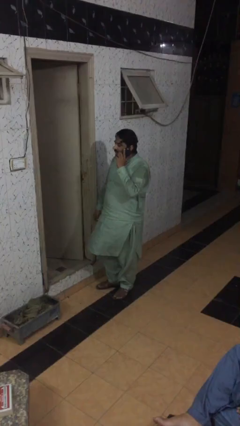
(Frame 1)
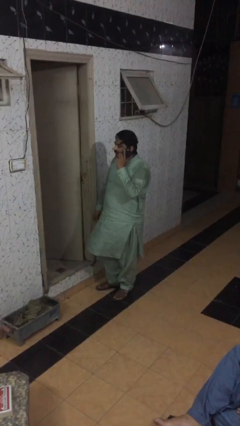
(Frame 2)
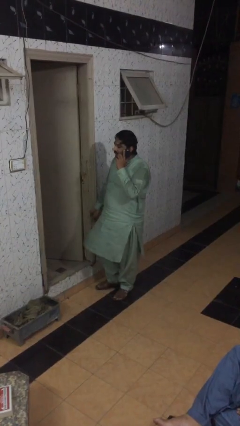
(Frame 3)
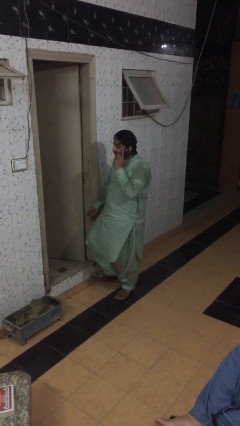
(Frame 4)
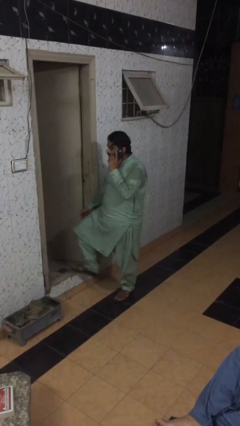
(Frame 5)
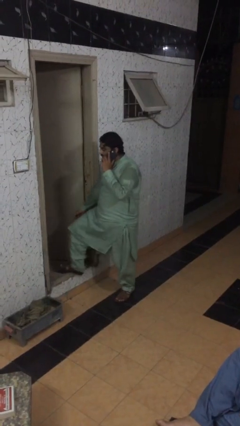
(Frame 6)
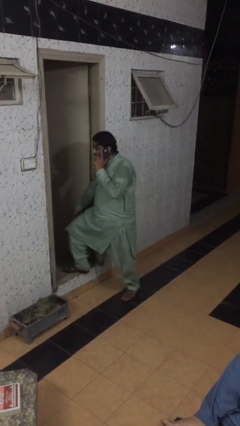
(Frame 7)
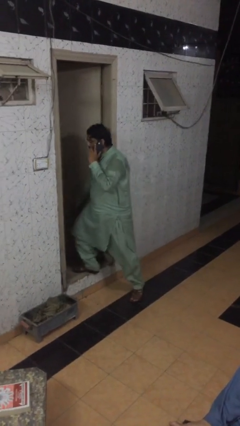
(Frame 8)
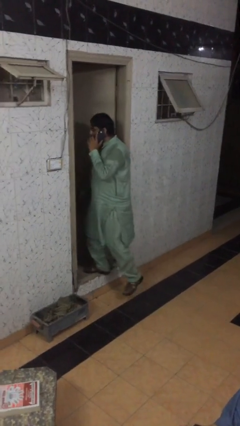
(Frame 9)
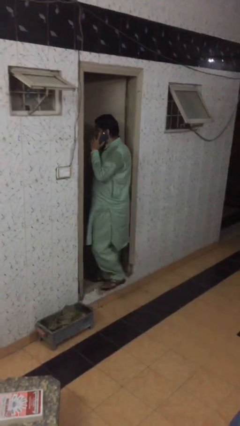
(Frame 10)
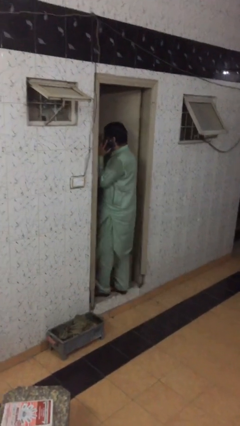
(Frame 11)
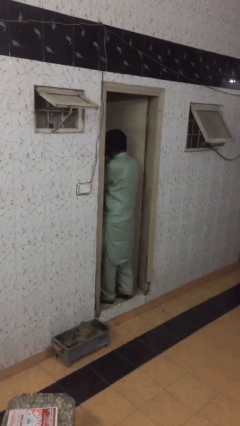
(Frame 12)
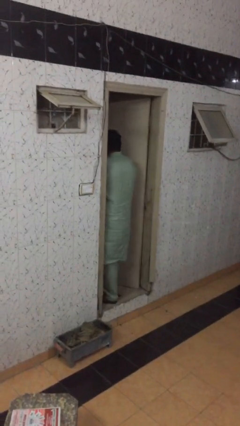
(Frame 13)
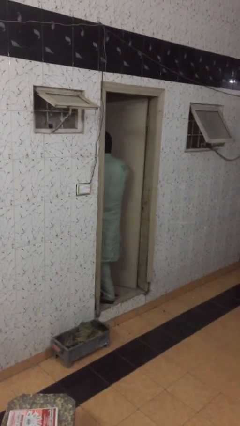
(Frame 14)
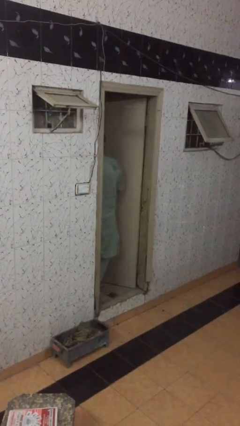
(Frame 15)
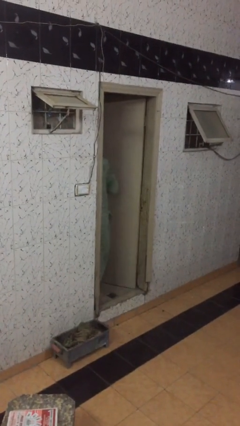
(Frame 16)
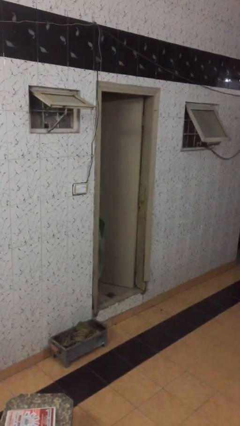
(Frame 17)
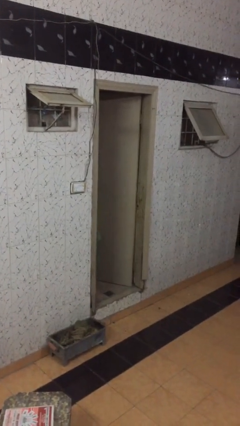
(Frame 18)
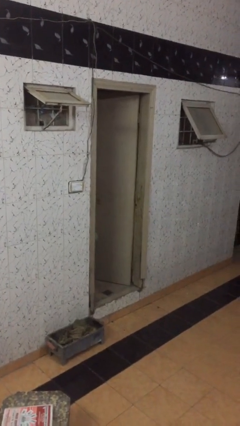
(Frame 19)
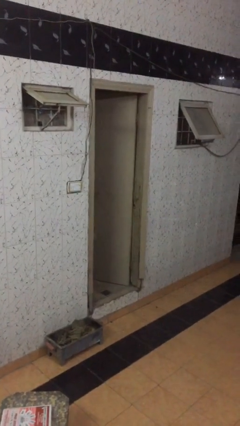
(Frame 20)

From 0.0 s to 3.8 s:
person exits scene through structure

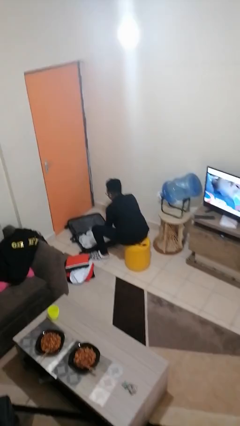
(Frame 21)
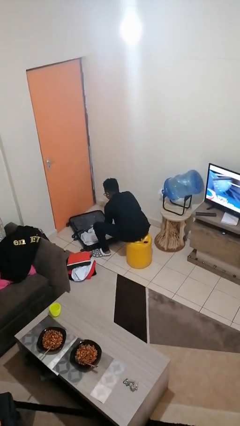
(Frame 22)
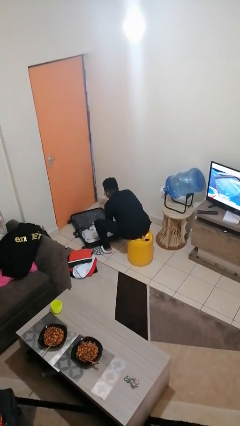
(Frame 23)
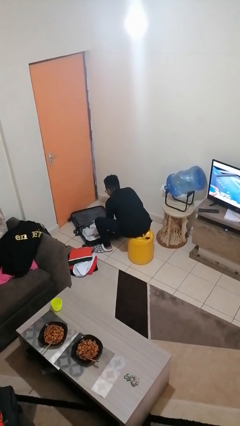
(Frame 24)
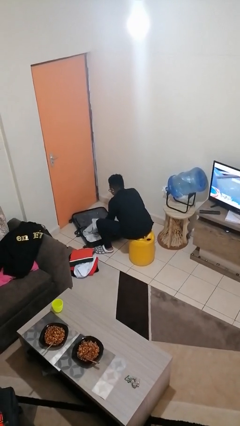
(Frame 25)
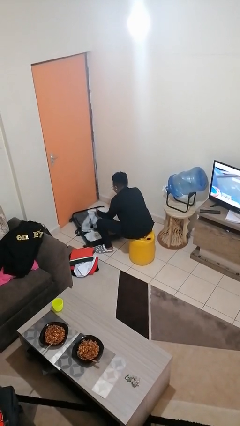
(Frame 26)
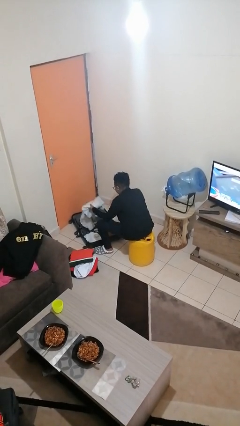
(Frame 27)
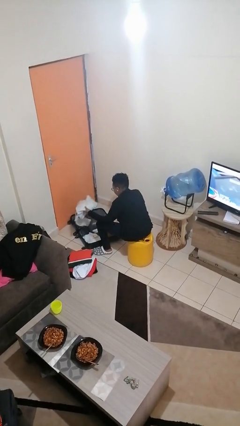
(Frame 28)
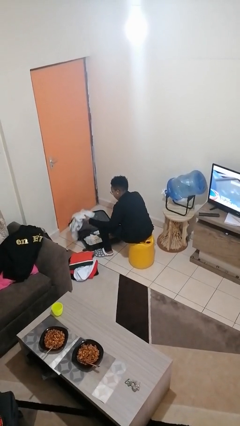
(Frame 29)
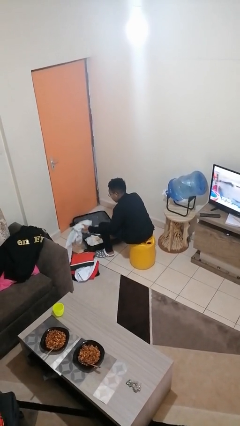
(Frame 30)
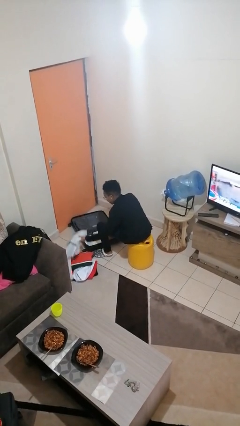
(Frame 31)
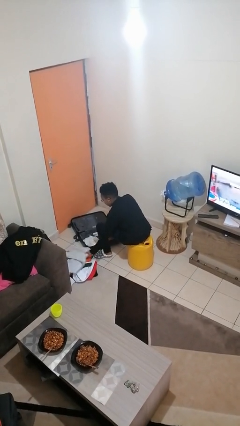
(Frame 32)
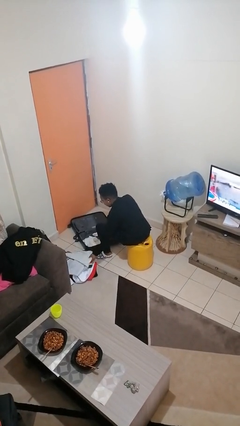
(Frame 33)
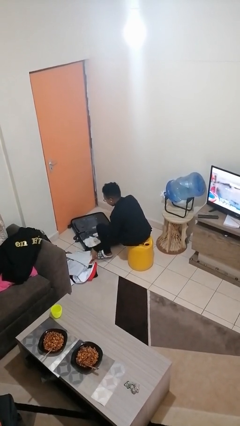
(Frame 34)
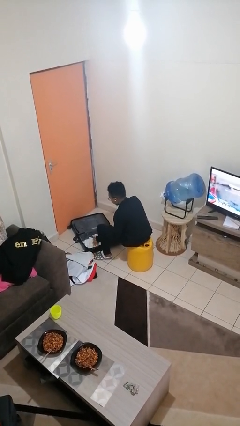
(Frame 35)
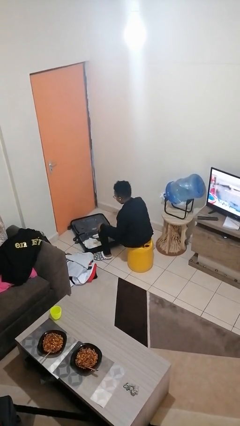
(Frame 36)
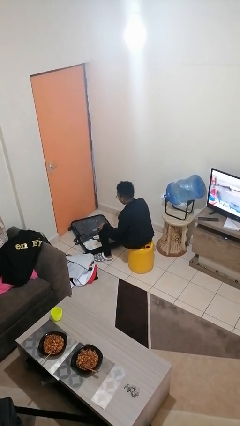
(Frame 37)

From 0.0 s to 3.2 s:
person unloads clothes from suitcase

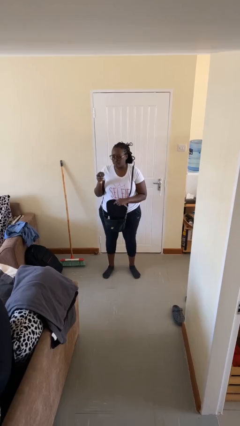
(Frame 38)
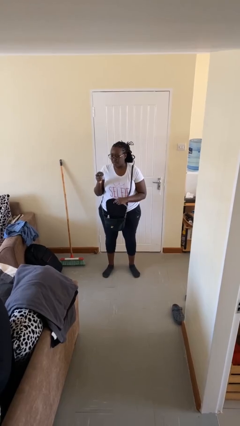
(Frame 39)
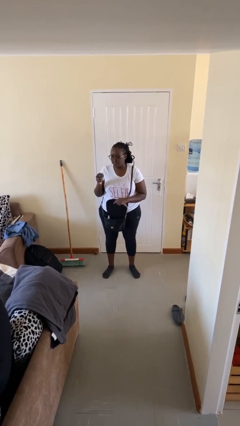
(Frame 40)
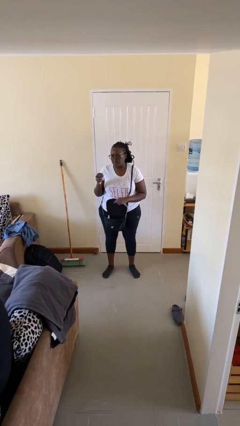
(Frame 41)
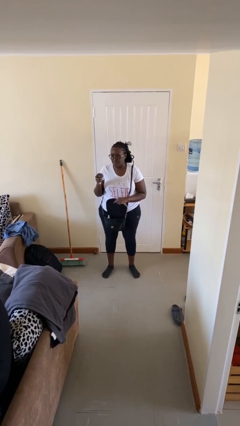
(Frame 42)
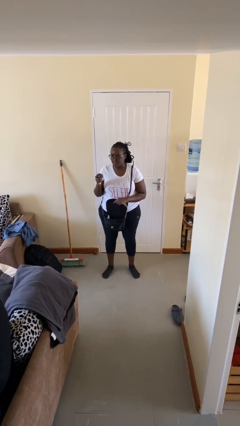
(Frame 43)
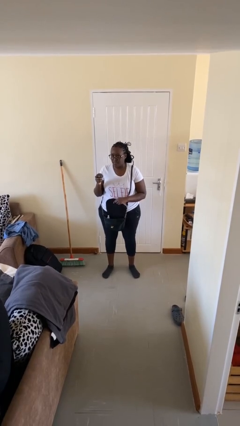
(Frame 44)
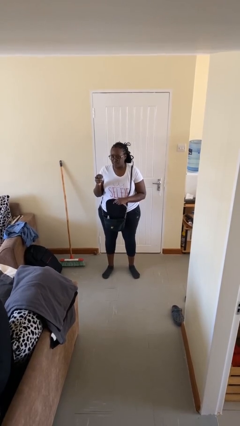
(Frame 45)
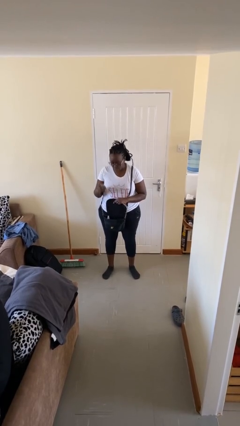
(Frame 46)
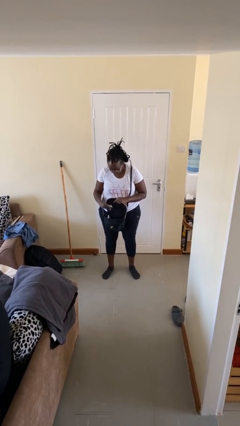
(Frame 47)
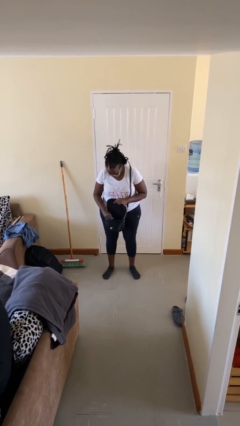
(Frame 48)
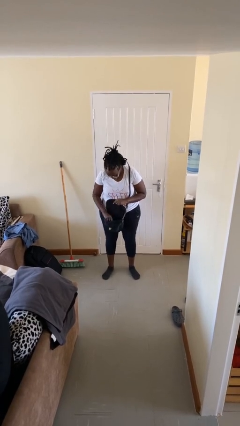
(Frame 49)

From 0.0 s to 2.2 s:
person takes object from purse

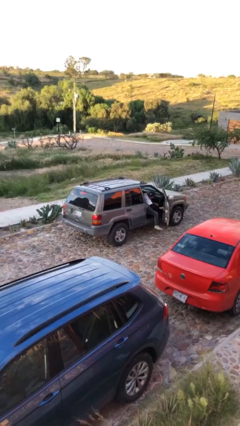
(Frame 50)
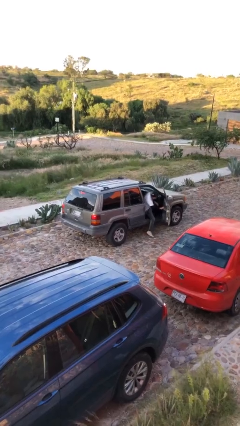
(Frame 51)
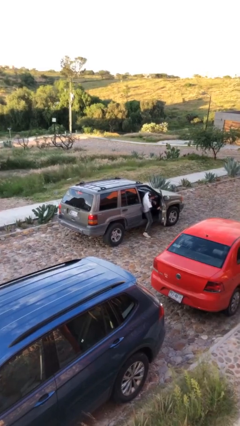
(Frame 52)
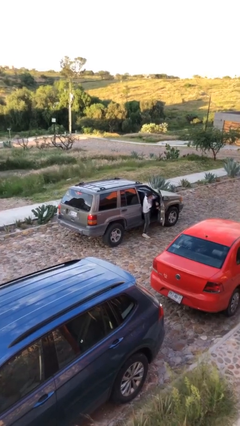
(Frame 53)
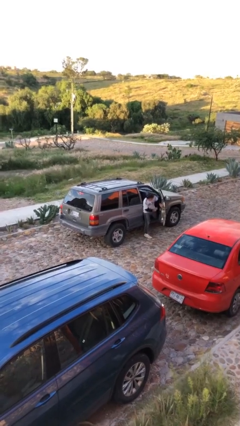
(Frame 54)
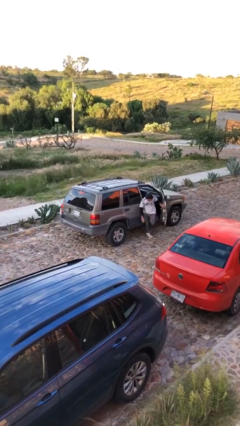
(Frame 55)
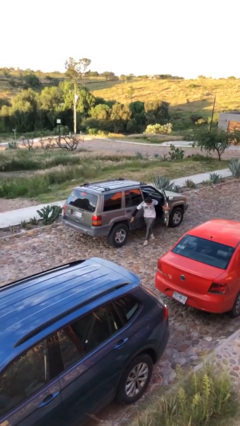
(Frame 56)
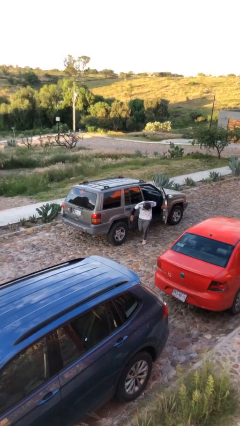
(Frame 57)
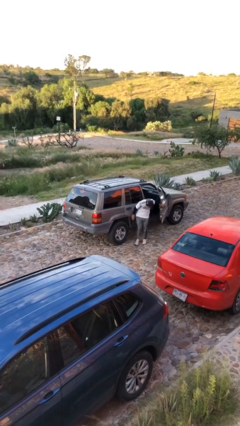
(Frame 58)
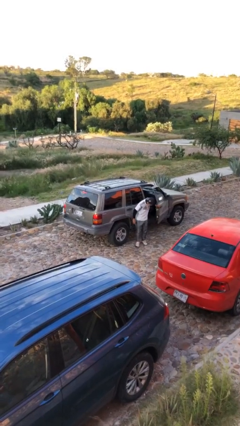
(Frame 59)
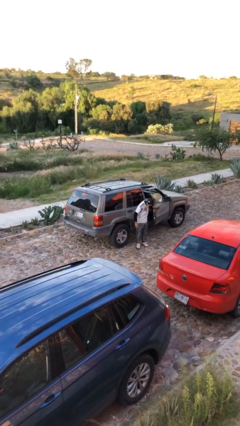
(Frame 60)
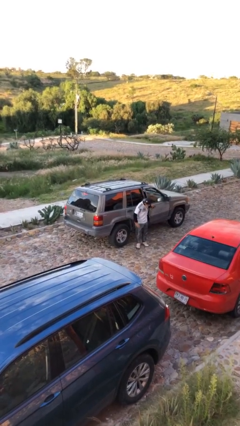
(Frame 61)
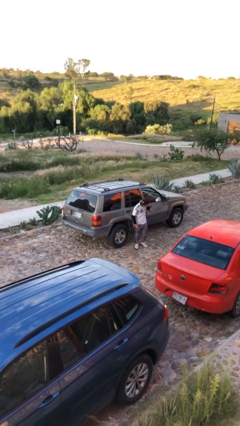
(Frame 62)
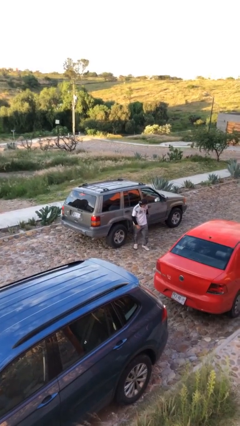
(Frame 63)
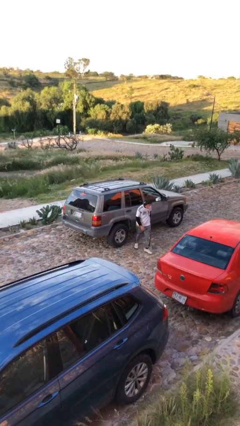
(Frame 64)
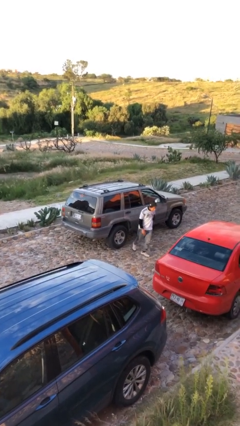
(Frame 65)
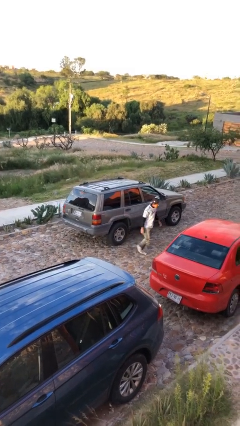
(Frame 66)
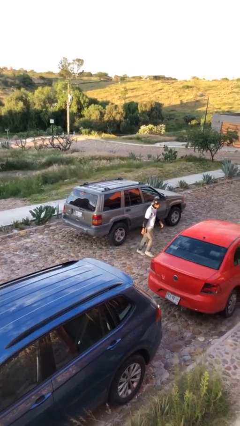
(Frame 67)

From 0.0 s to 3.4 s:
car drops off person

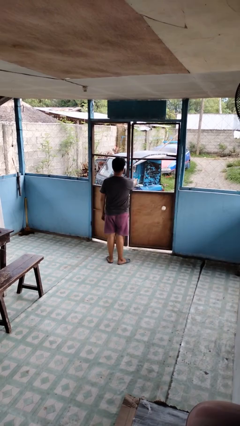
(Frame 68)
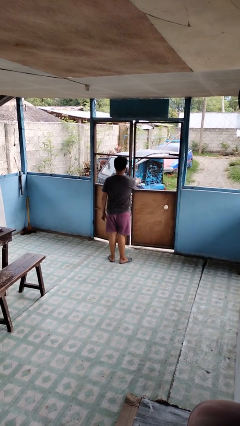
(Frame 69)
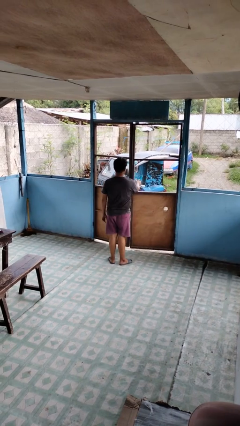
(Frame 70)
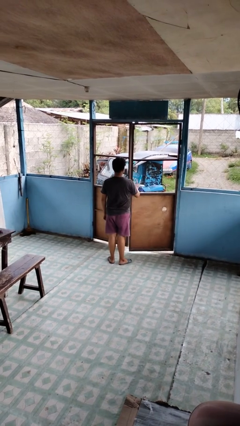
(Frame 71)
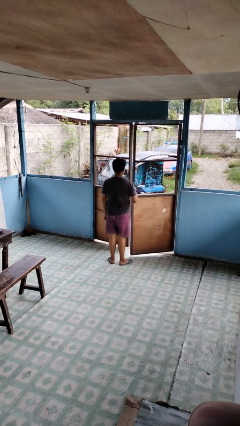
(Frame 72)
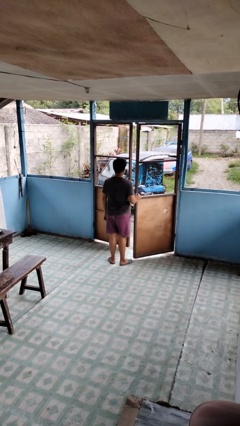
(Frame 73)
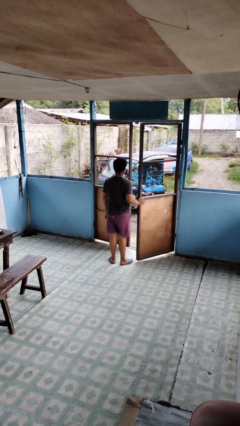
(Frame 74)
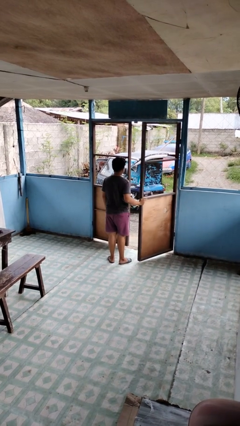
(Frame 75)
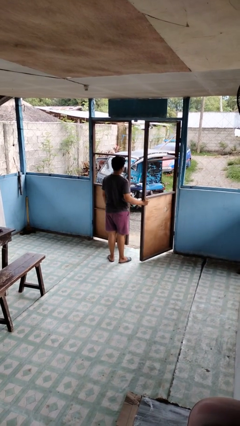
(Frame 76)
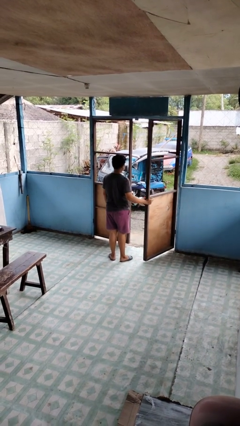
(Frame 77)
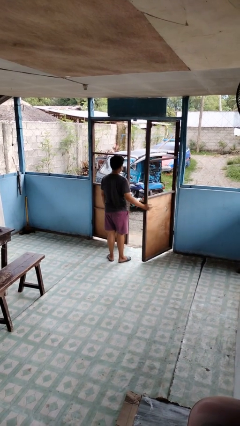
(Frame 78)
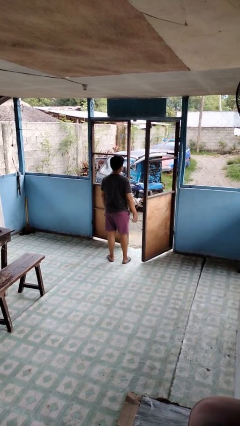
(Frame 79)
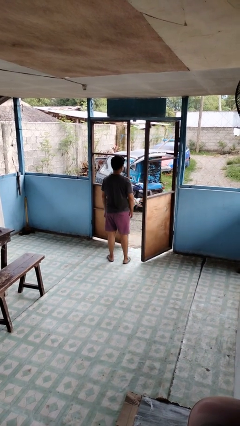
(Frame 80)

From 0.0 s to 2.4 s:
person opens facility door

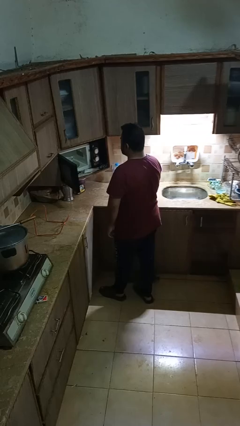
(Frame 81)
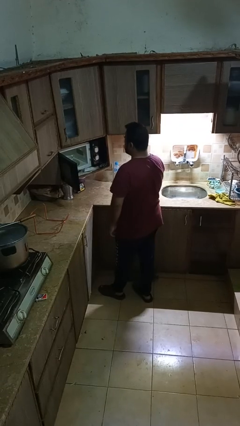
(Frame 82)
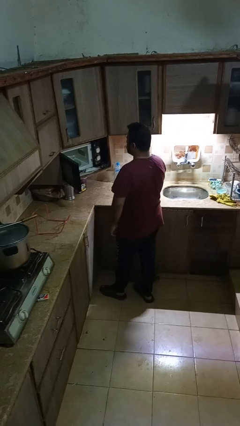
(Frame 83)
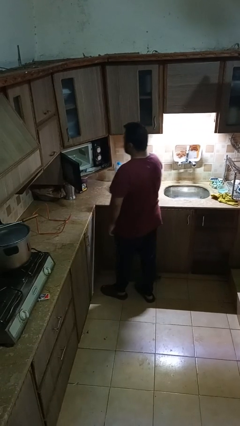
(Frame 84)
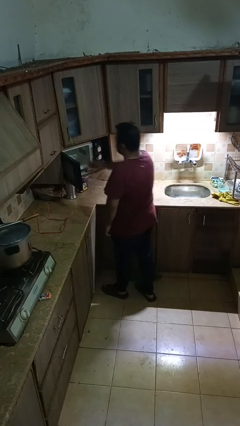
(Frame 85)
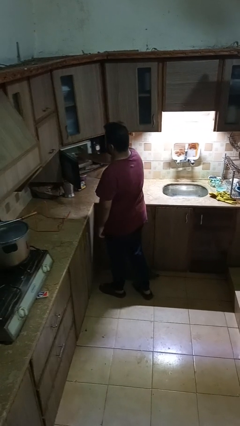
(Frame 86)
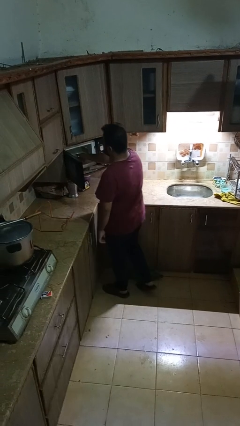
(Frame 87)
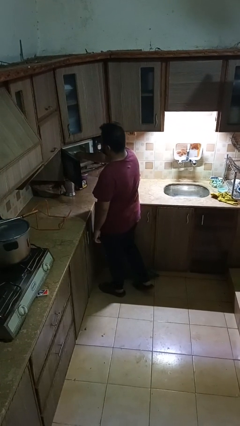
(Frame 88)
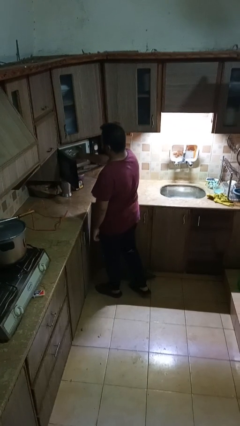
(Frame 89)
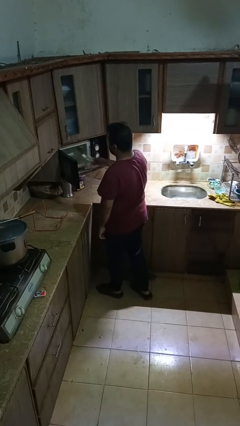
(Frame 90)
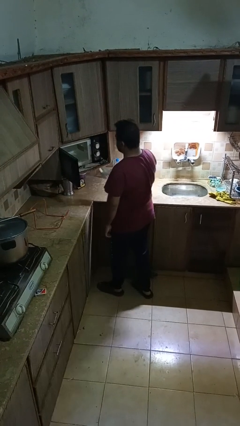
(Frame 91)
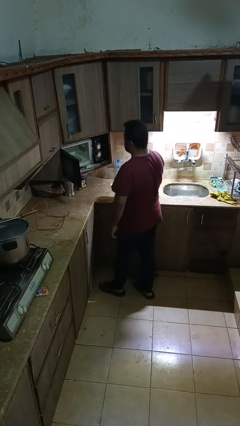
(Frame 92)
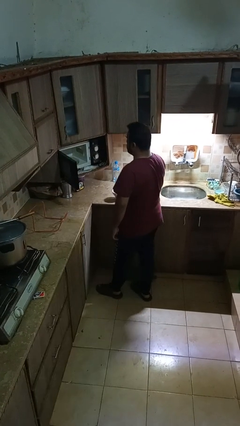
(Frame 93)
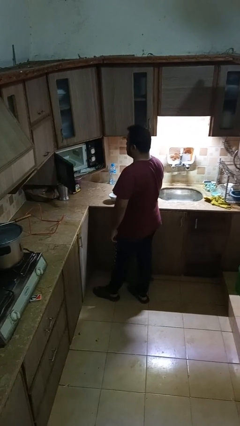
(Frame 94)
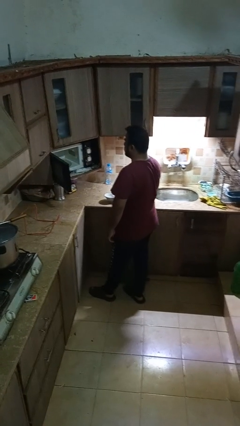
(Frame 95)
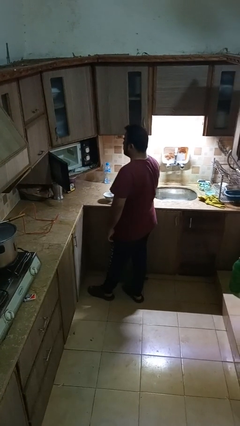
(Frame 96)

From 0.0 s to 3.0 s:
person takes object from microwave
